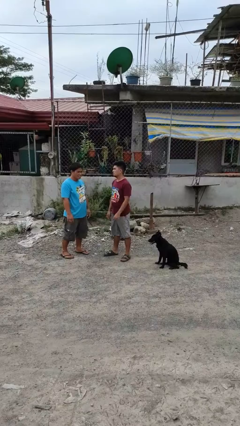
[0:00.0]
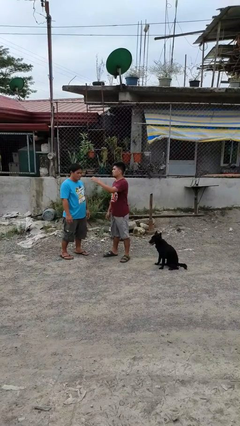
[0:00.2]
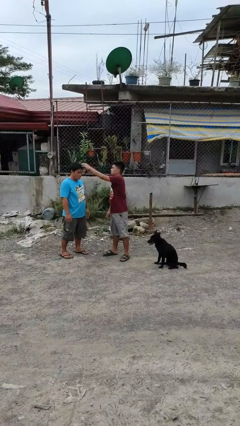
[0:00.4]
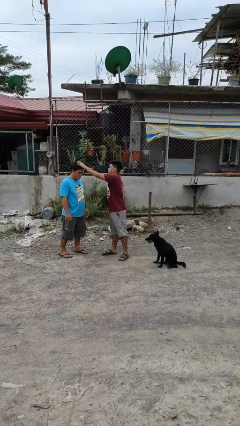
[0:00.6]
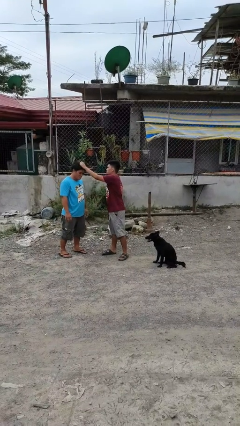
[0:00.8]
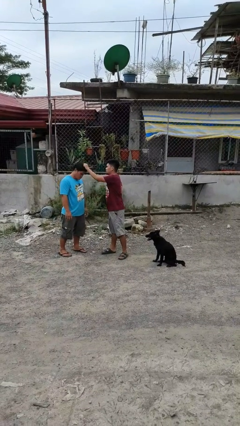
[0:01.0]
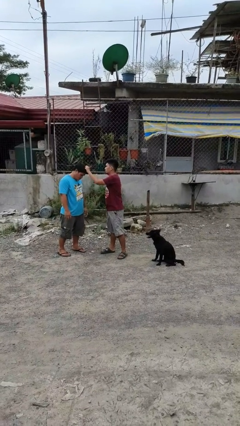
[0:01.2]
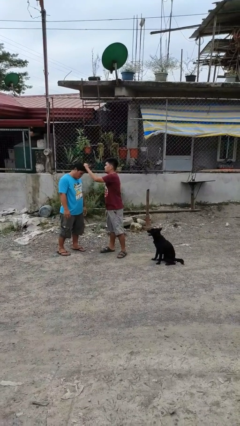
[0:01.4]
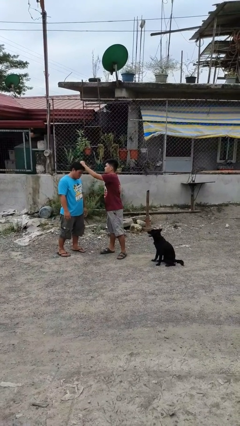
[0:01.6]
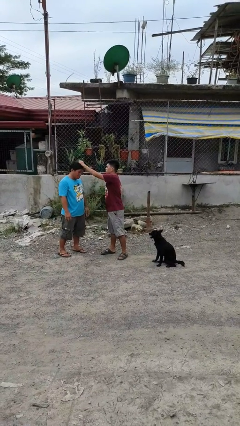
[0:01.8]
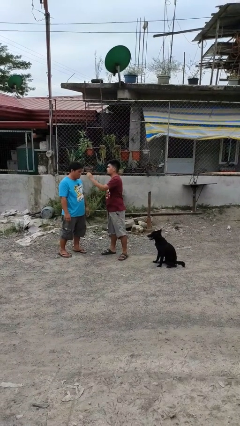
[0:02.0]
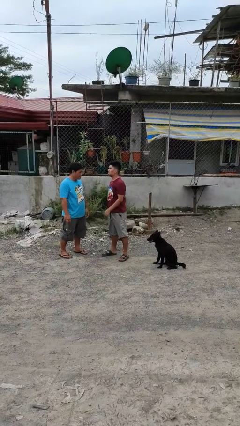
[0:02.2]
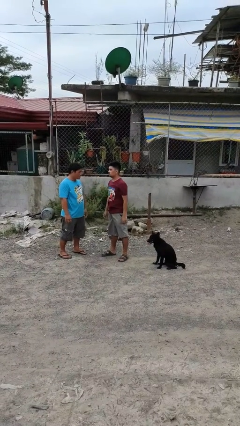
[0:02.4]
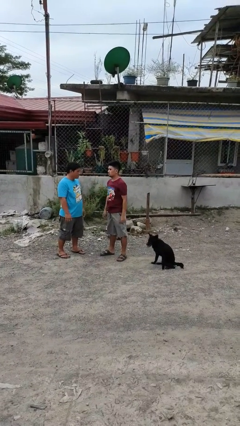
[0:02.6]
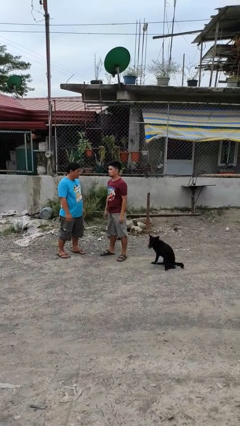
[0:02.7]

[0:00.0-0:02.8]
person grabs person by hair

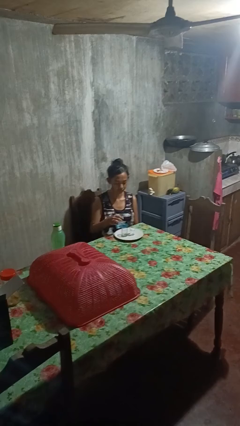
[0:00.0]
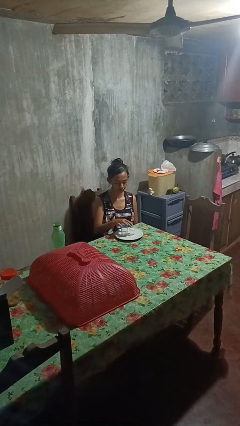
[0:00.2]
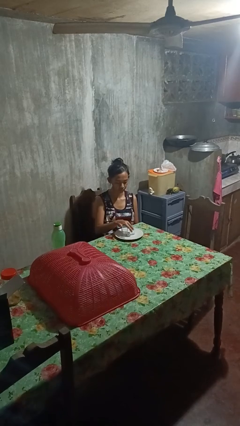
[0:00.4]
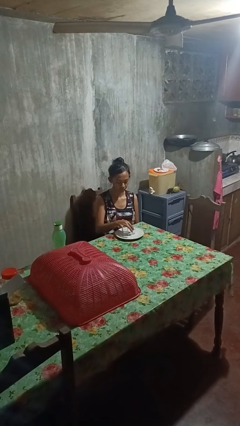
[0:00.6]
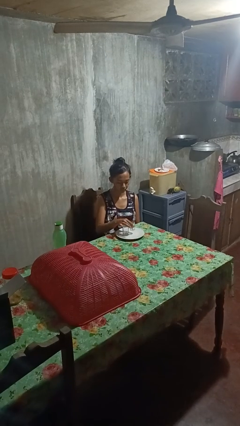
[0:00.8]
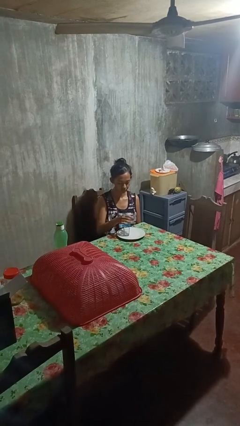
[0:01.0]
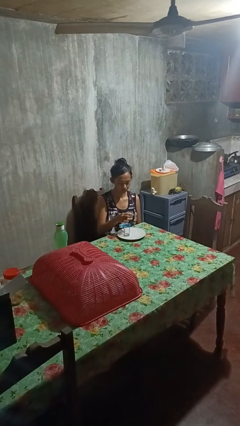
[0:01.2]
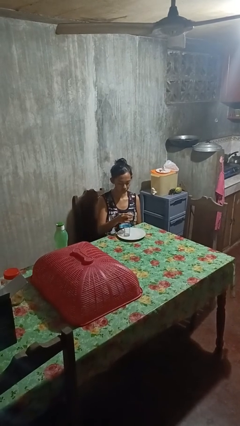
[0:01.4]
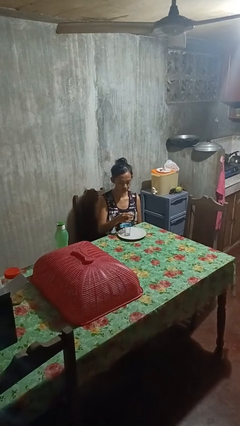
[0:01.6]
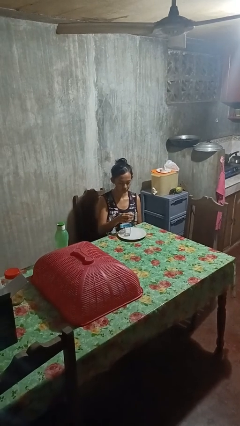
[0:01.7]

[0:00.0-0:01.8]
person picks up object from table

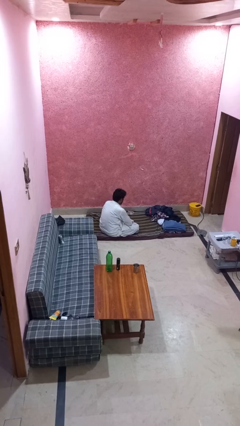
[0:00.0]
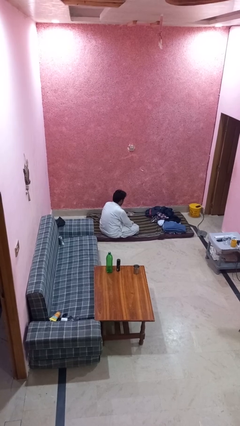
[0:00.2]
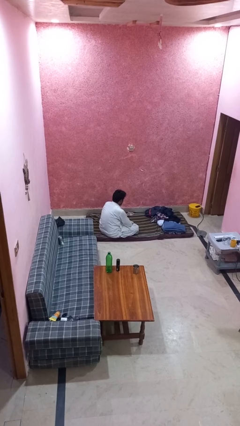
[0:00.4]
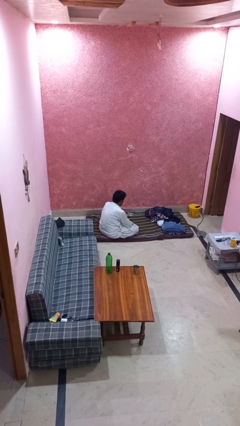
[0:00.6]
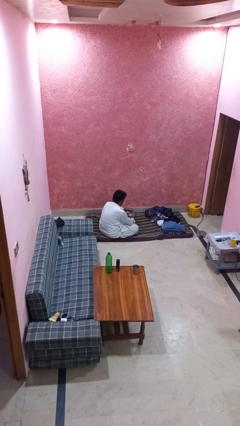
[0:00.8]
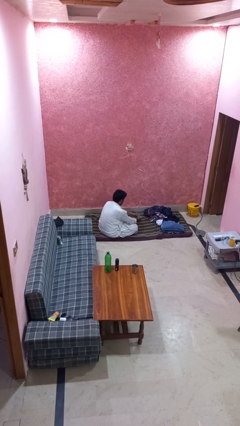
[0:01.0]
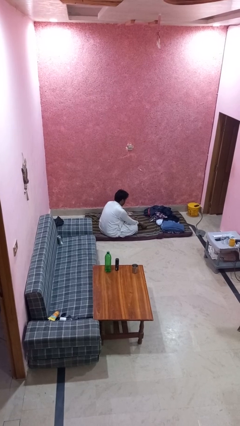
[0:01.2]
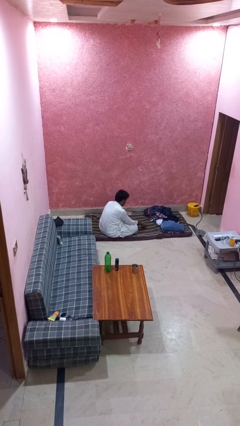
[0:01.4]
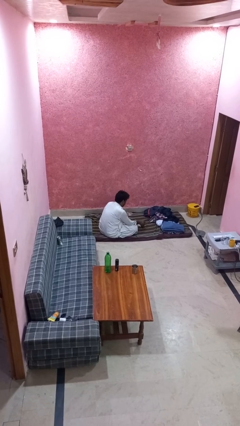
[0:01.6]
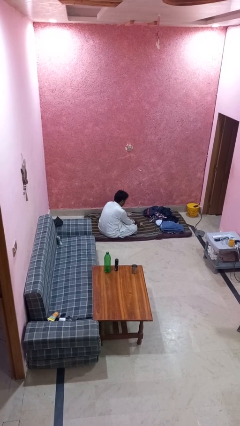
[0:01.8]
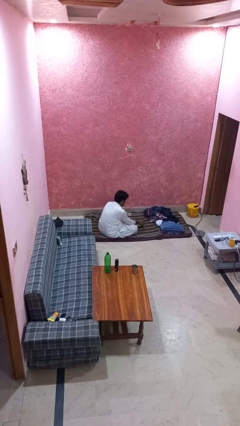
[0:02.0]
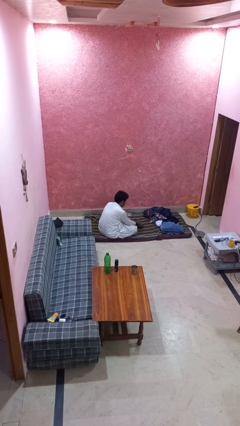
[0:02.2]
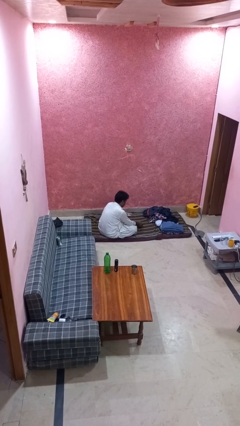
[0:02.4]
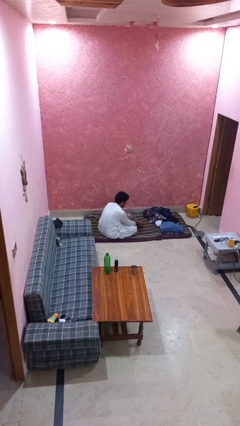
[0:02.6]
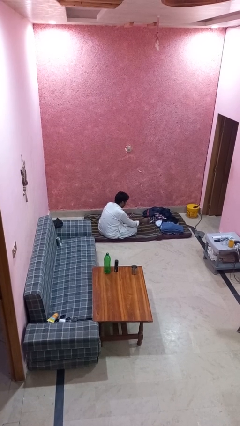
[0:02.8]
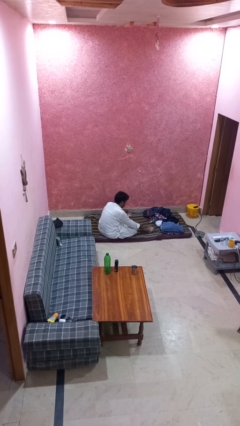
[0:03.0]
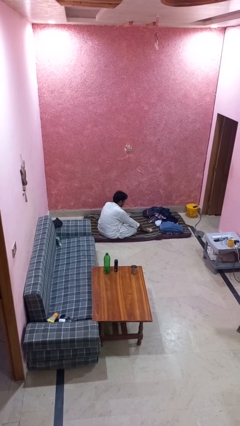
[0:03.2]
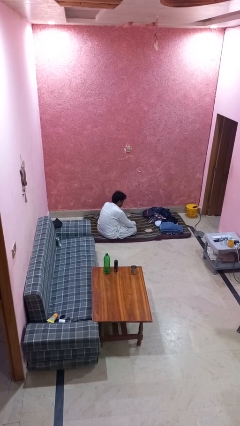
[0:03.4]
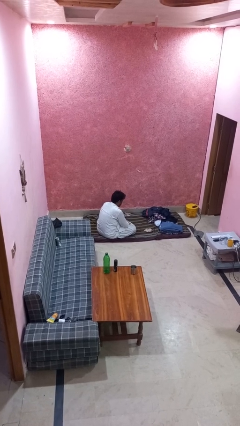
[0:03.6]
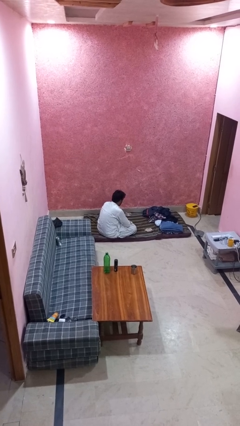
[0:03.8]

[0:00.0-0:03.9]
person folds socks

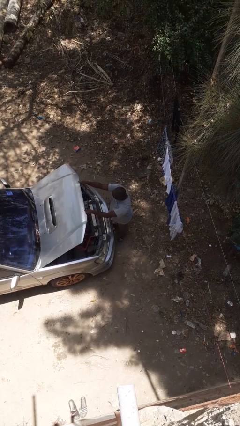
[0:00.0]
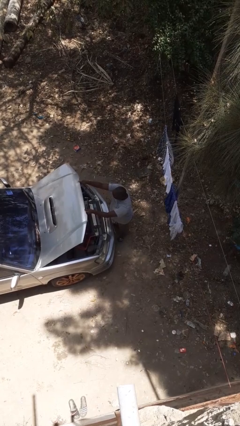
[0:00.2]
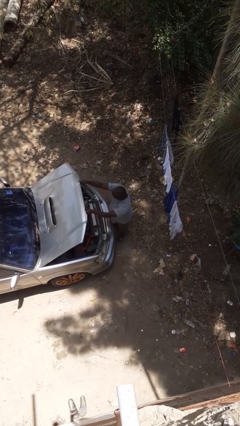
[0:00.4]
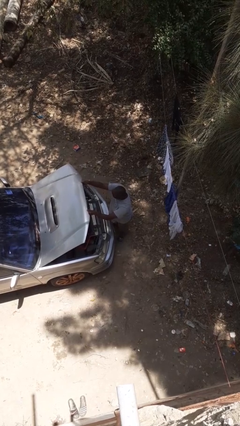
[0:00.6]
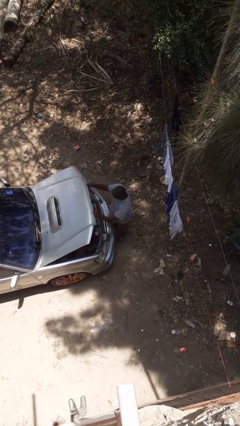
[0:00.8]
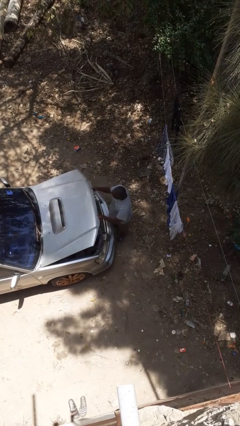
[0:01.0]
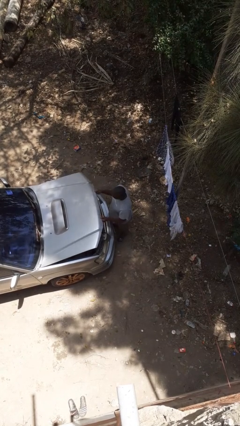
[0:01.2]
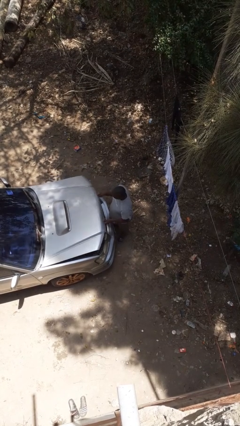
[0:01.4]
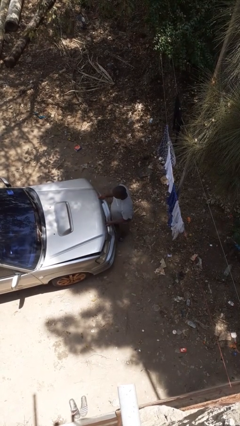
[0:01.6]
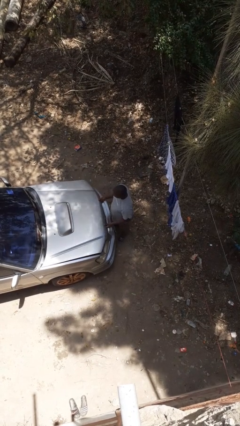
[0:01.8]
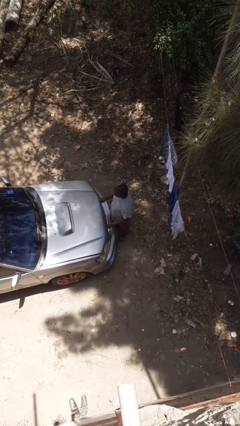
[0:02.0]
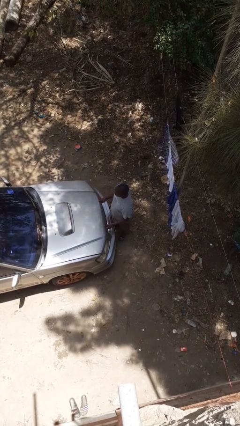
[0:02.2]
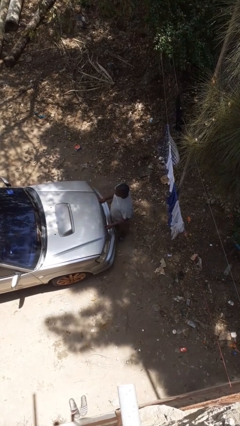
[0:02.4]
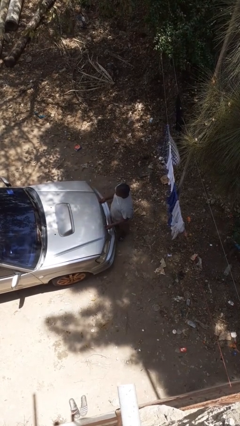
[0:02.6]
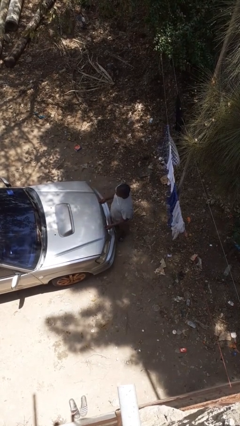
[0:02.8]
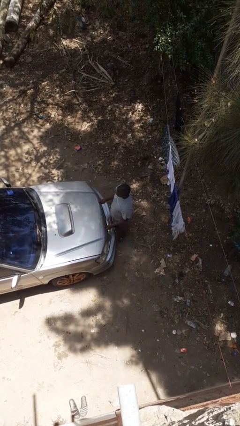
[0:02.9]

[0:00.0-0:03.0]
person closes car hood

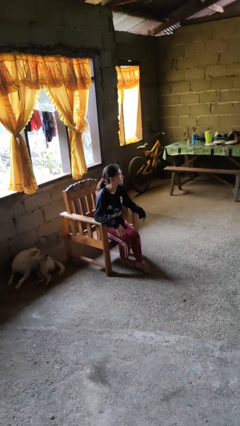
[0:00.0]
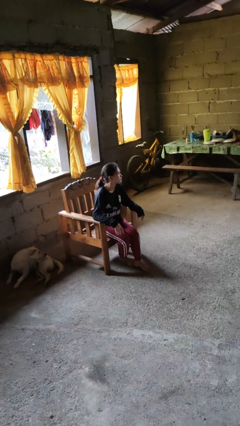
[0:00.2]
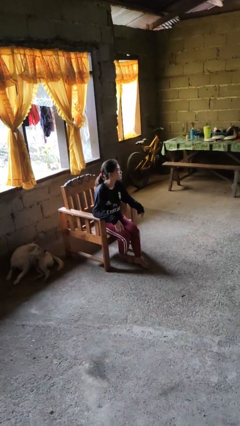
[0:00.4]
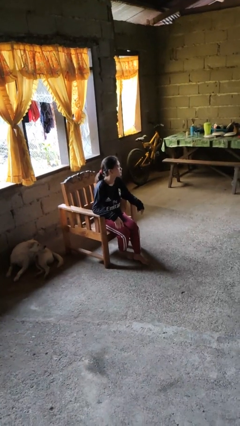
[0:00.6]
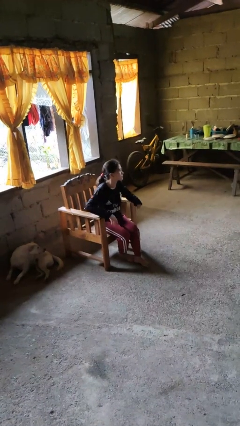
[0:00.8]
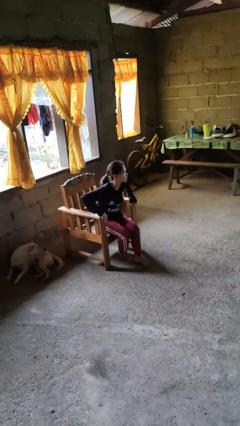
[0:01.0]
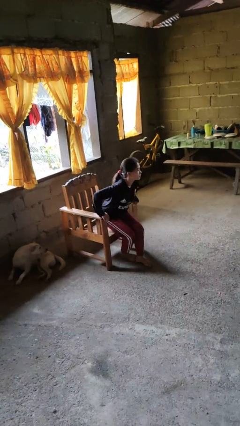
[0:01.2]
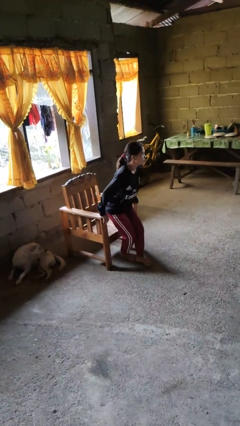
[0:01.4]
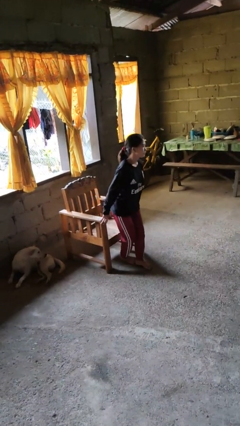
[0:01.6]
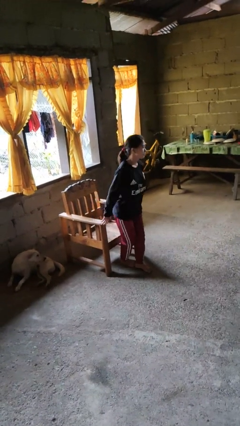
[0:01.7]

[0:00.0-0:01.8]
person stands up from floor

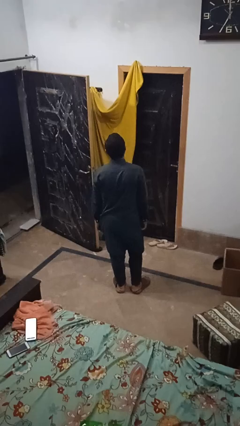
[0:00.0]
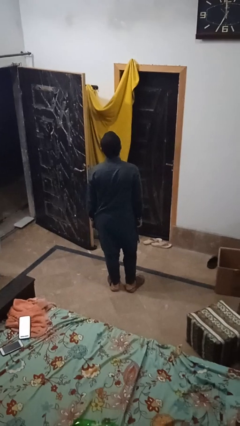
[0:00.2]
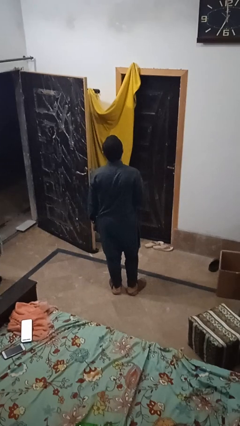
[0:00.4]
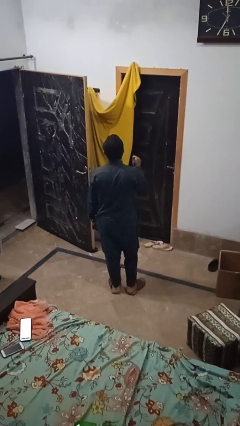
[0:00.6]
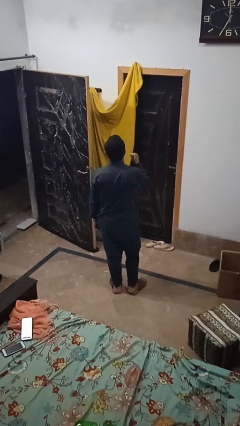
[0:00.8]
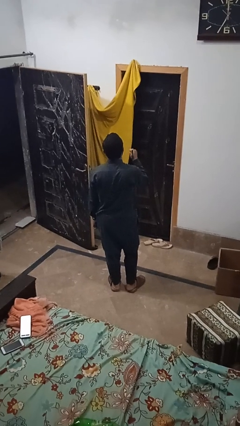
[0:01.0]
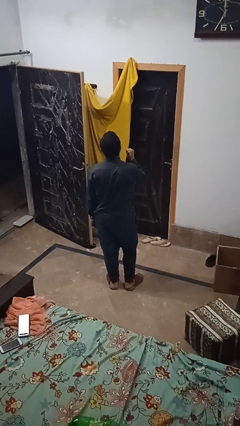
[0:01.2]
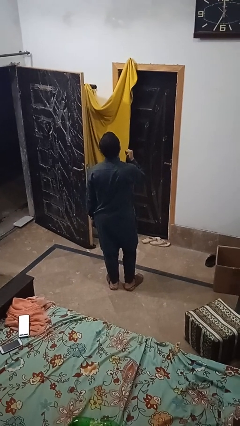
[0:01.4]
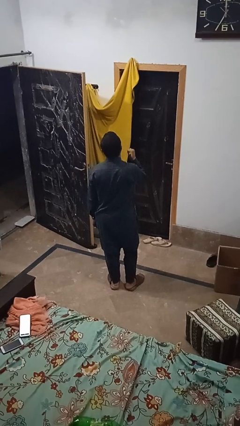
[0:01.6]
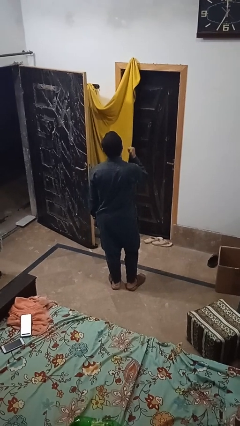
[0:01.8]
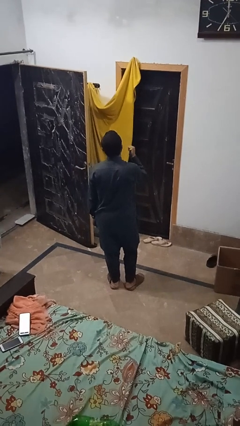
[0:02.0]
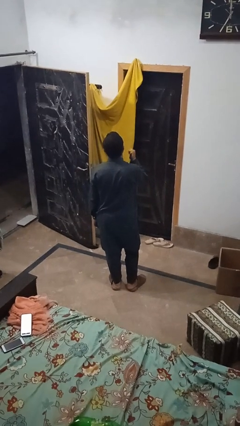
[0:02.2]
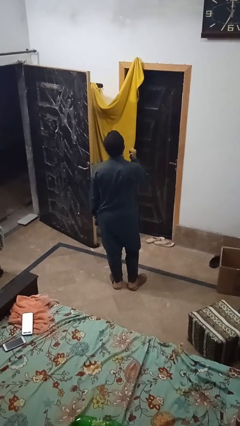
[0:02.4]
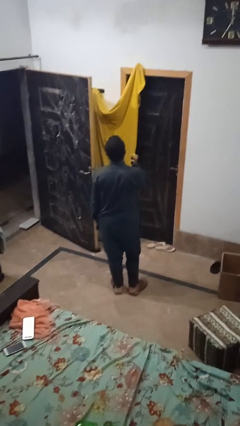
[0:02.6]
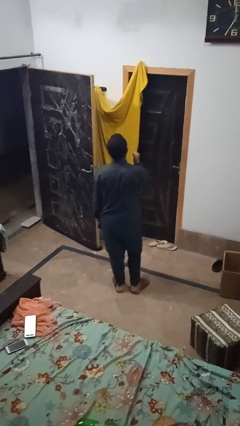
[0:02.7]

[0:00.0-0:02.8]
person gestures behind me

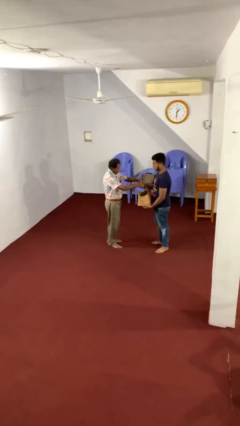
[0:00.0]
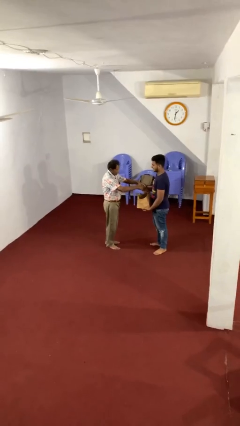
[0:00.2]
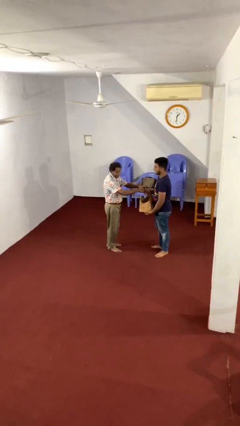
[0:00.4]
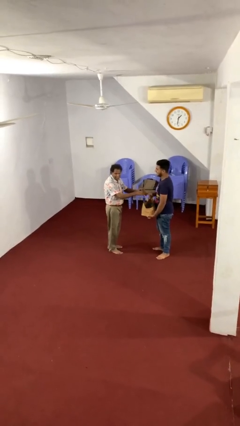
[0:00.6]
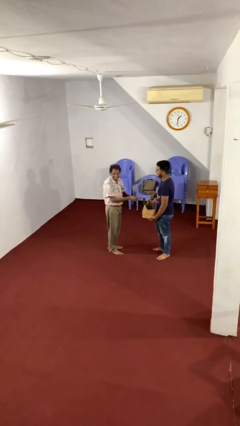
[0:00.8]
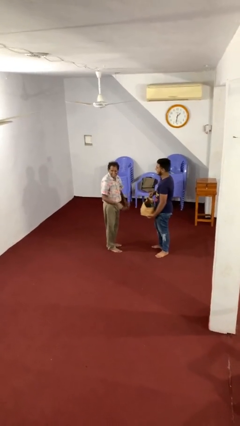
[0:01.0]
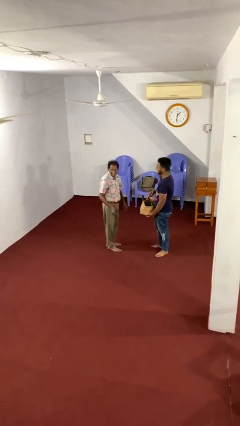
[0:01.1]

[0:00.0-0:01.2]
person transfers object to person
